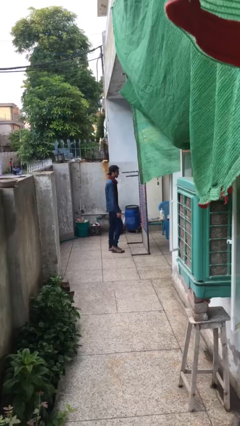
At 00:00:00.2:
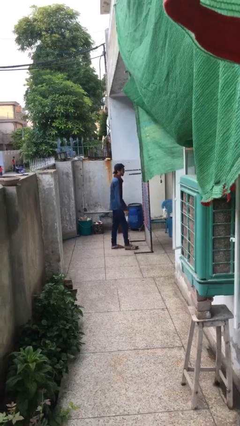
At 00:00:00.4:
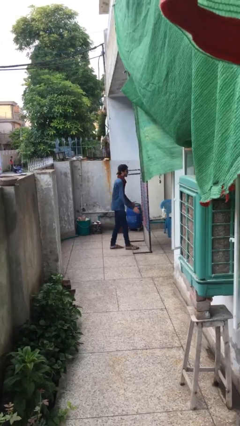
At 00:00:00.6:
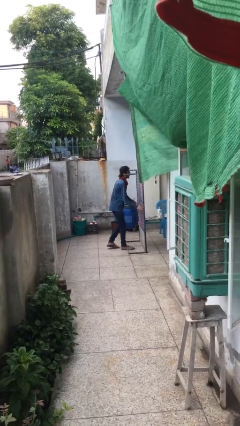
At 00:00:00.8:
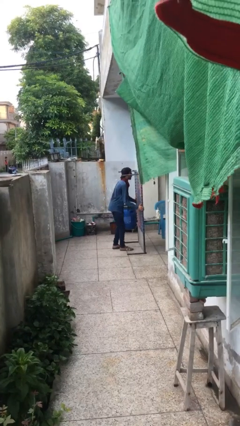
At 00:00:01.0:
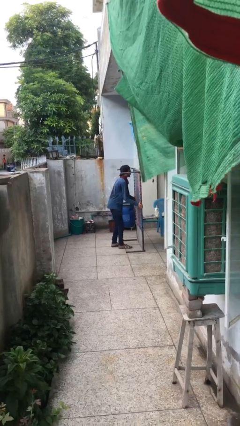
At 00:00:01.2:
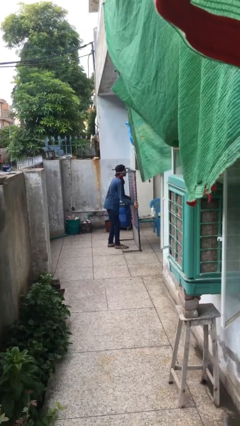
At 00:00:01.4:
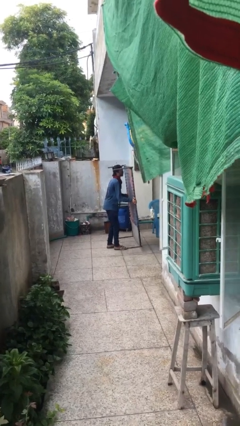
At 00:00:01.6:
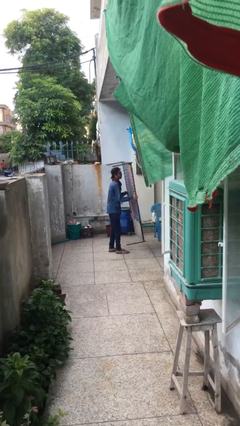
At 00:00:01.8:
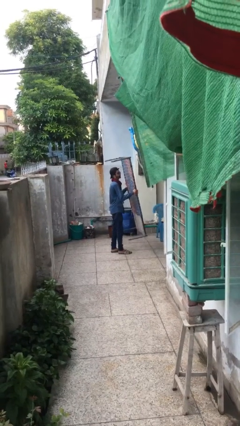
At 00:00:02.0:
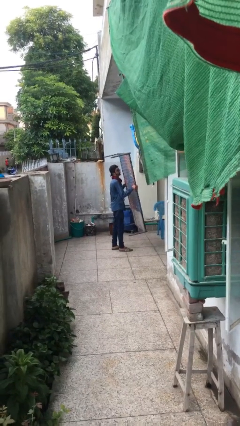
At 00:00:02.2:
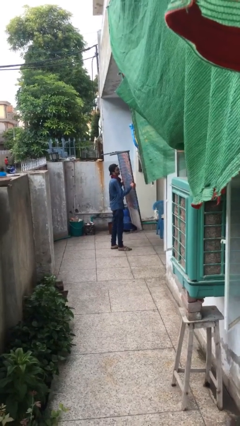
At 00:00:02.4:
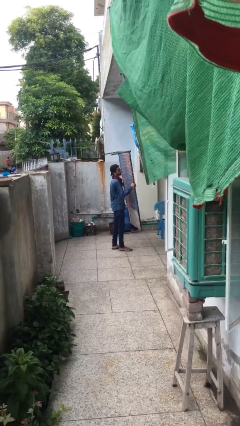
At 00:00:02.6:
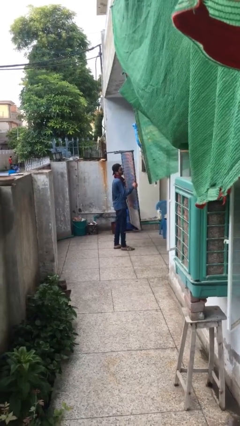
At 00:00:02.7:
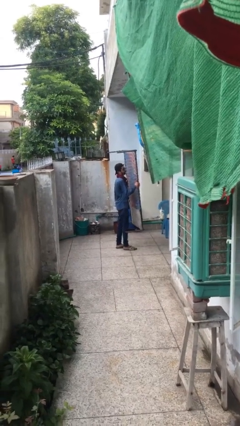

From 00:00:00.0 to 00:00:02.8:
person picks up object from floor

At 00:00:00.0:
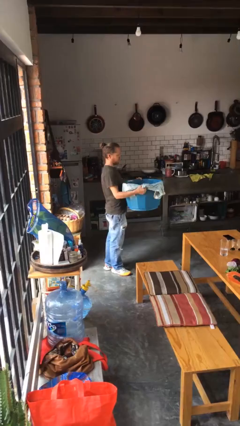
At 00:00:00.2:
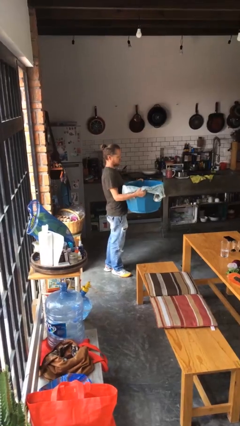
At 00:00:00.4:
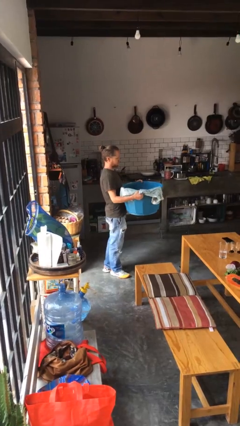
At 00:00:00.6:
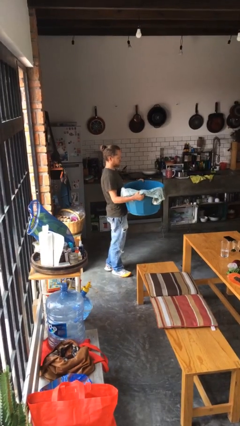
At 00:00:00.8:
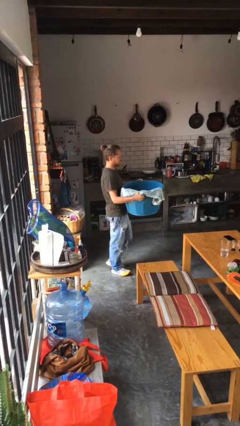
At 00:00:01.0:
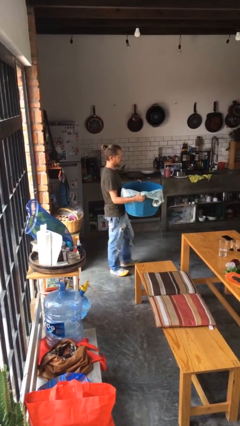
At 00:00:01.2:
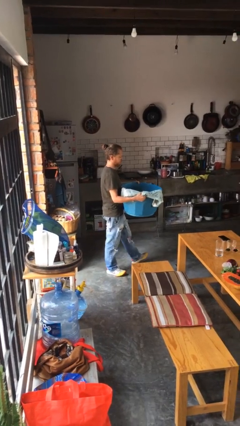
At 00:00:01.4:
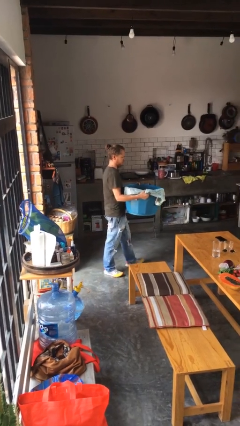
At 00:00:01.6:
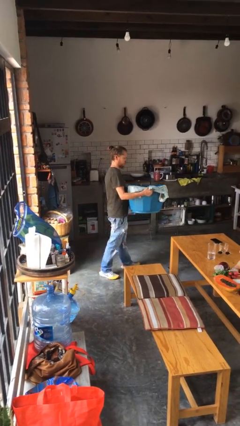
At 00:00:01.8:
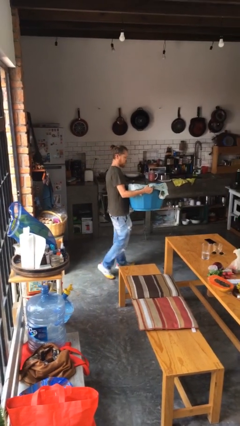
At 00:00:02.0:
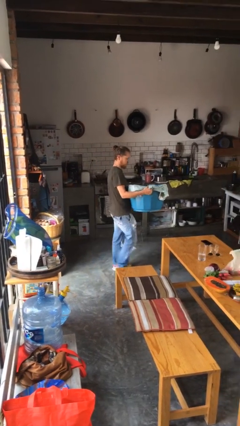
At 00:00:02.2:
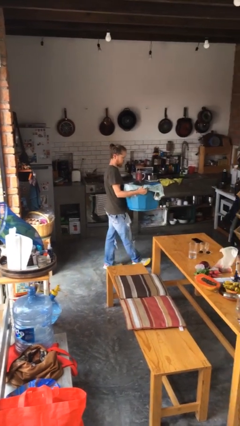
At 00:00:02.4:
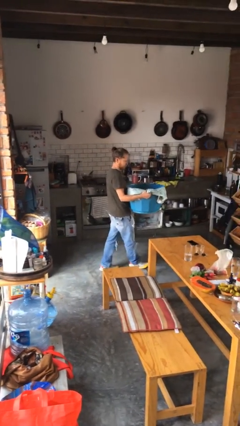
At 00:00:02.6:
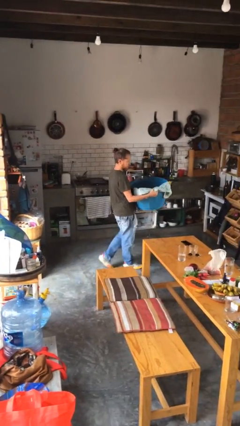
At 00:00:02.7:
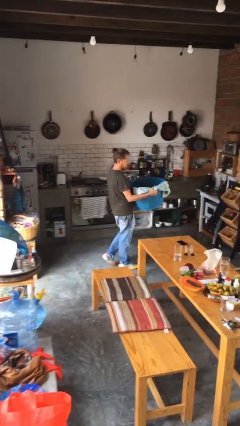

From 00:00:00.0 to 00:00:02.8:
person carries laundry basket

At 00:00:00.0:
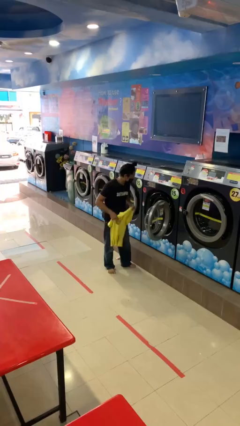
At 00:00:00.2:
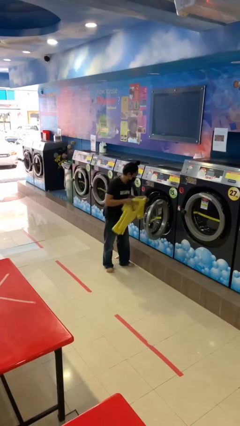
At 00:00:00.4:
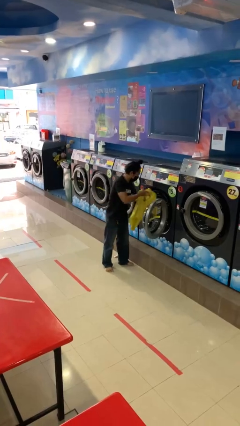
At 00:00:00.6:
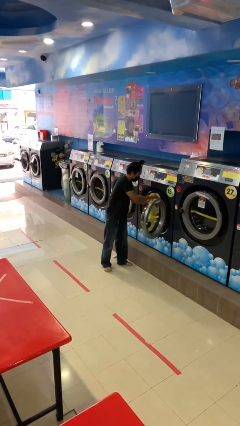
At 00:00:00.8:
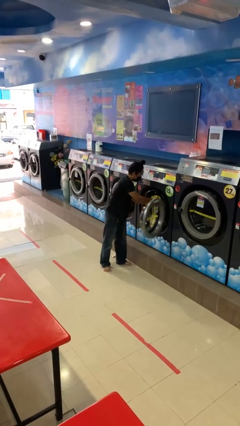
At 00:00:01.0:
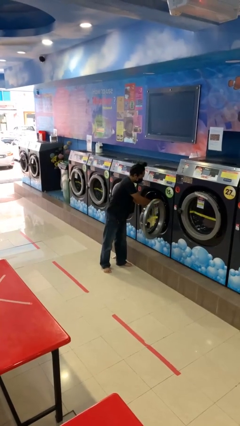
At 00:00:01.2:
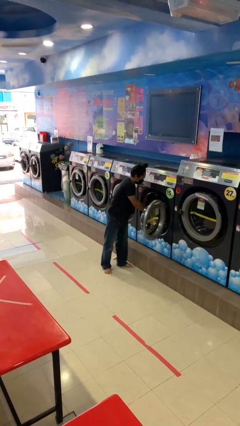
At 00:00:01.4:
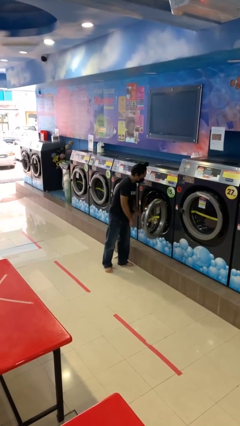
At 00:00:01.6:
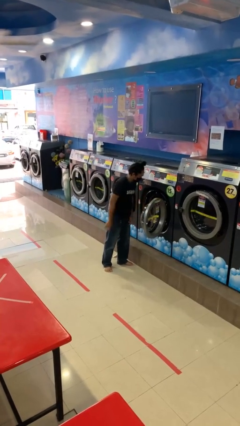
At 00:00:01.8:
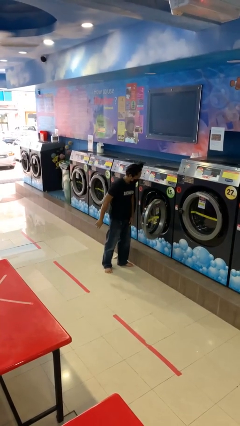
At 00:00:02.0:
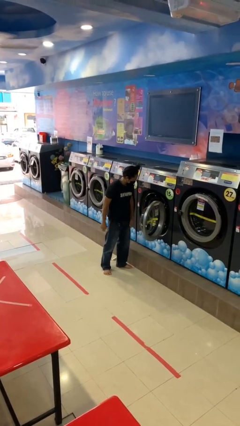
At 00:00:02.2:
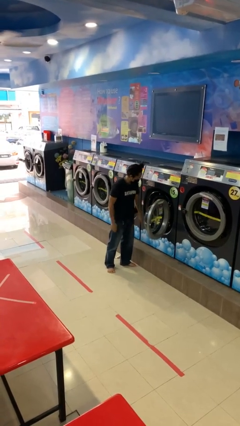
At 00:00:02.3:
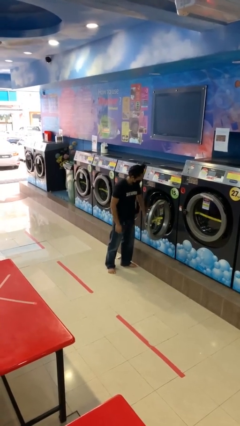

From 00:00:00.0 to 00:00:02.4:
person loads clotheswasher

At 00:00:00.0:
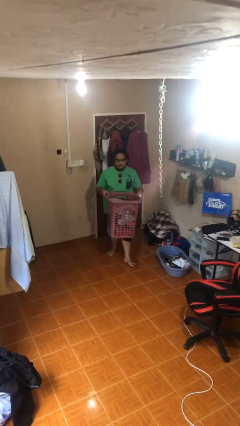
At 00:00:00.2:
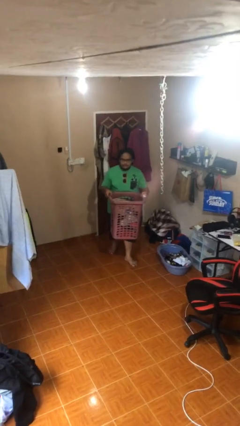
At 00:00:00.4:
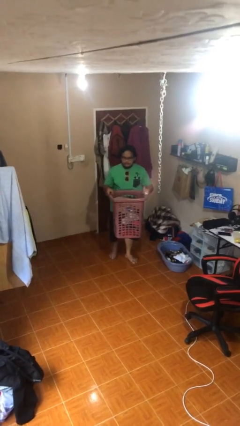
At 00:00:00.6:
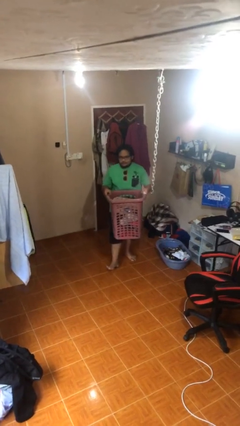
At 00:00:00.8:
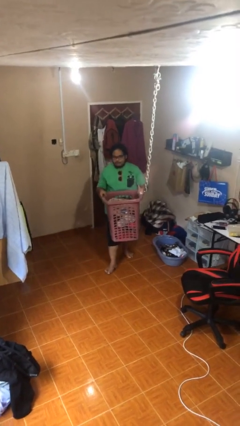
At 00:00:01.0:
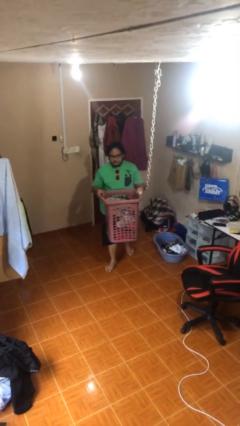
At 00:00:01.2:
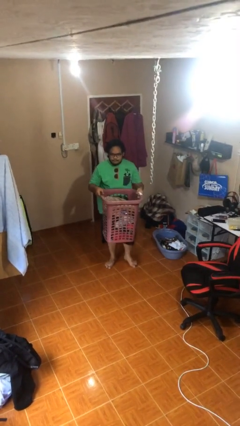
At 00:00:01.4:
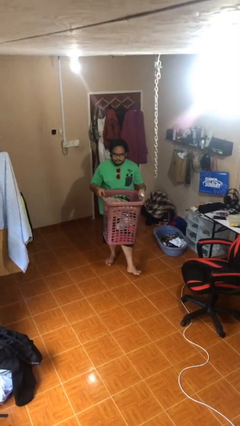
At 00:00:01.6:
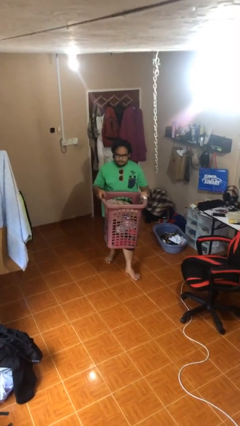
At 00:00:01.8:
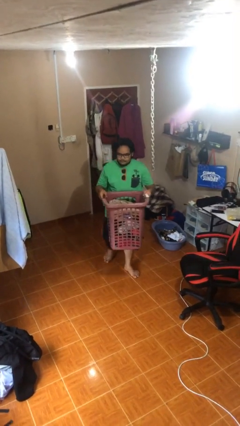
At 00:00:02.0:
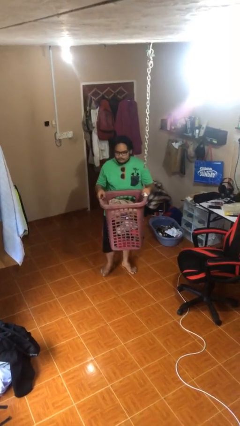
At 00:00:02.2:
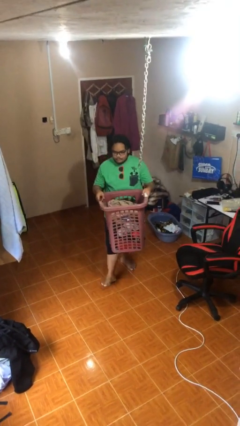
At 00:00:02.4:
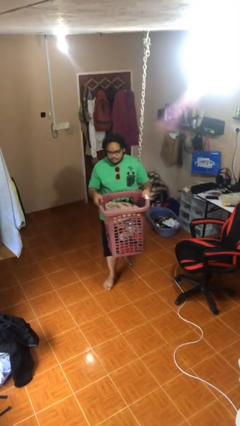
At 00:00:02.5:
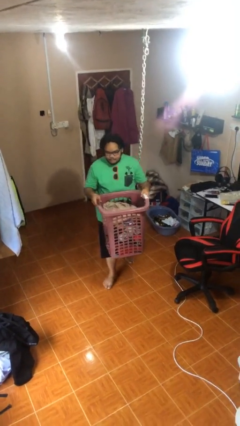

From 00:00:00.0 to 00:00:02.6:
person carries heavy object

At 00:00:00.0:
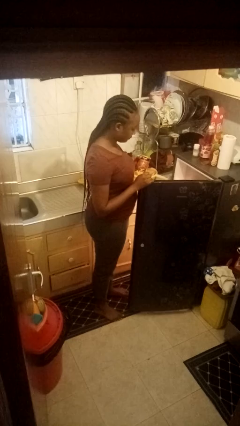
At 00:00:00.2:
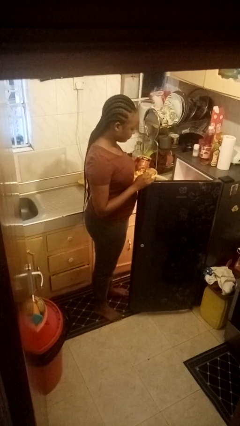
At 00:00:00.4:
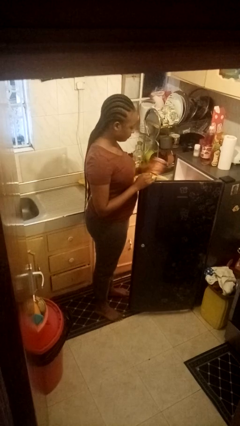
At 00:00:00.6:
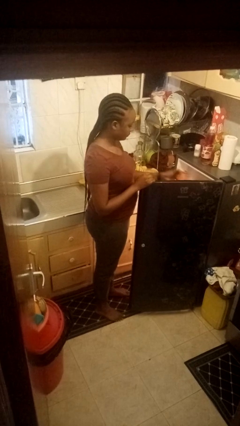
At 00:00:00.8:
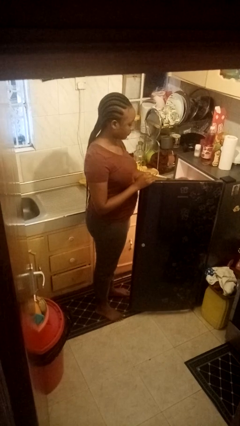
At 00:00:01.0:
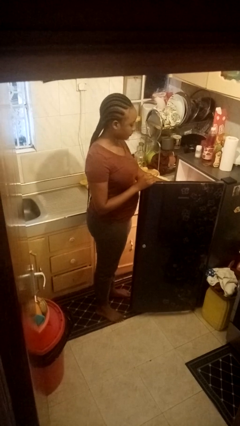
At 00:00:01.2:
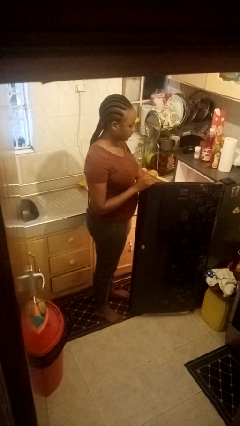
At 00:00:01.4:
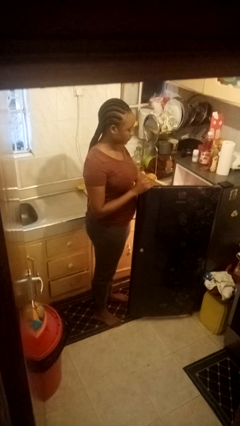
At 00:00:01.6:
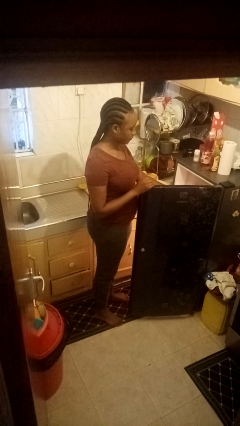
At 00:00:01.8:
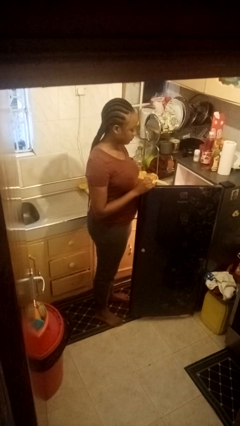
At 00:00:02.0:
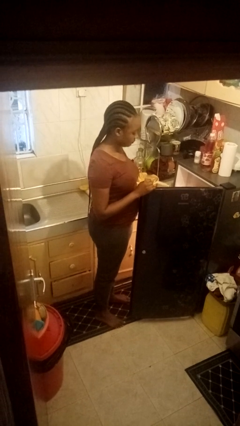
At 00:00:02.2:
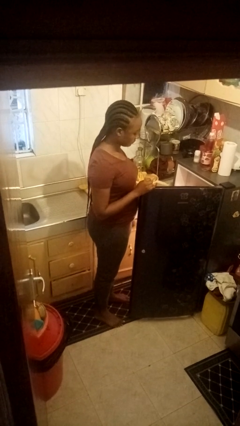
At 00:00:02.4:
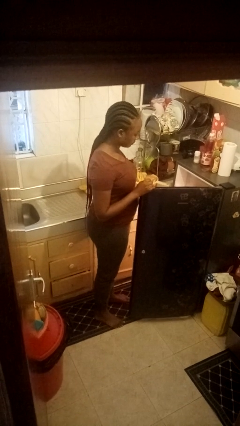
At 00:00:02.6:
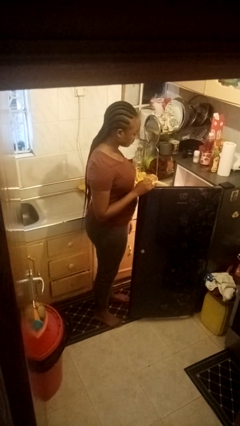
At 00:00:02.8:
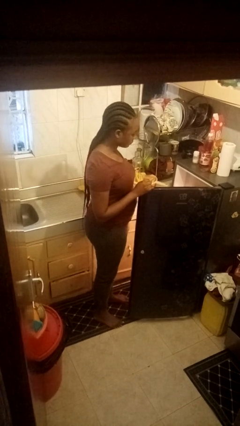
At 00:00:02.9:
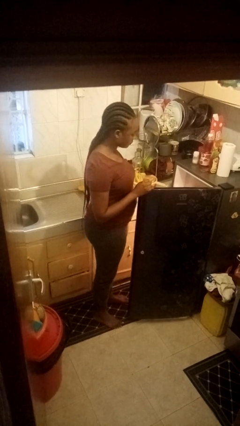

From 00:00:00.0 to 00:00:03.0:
person puts object into refrigerator

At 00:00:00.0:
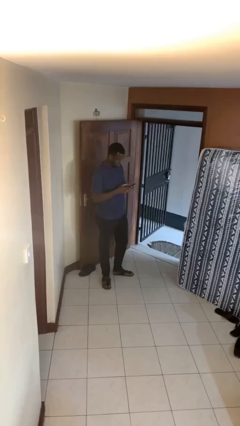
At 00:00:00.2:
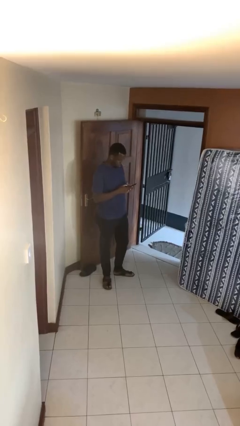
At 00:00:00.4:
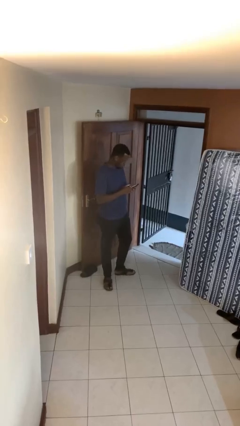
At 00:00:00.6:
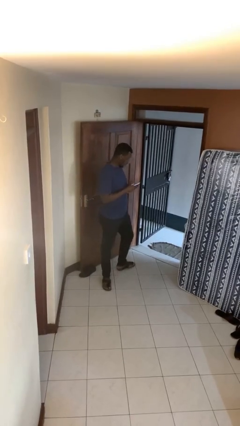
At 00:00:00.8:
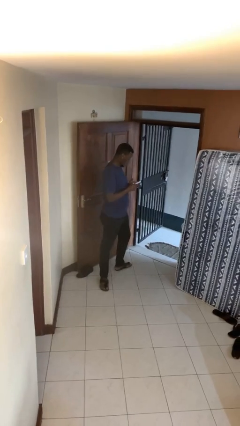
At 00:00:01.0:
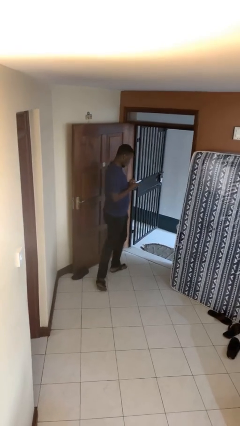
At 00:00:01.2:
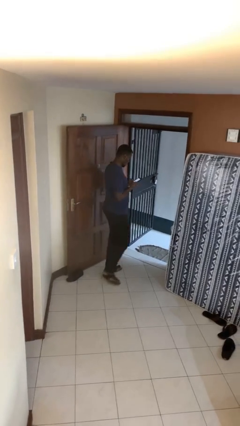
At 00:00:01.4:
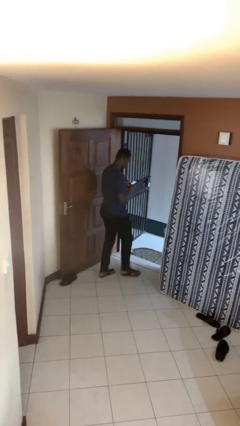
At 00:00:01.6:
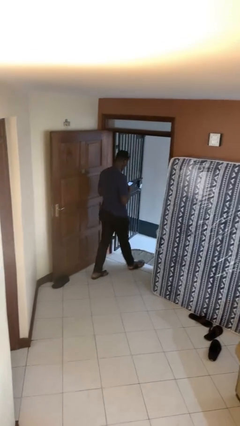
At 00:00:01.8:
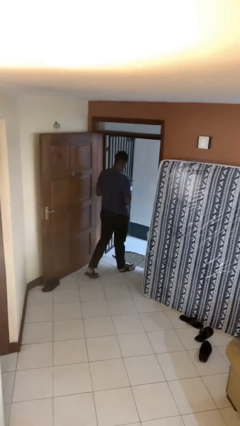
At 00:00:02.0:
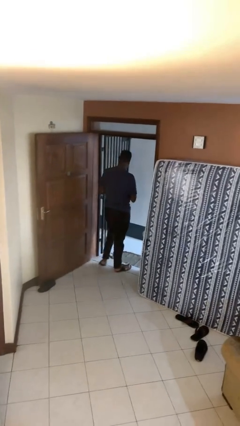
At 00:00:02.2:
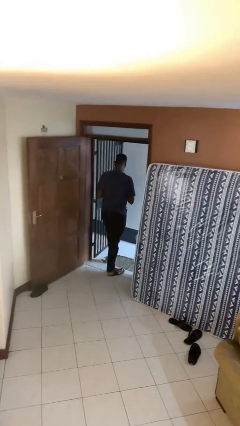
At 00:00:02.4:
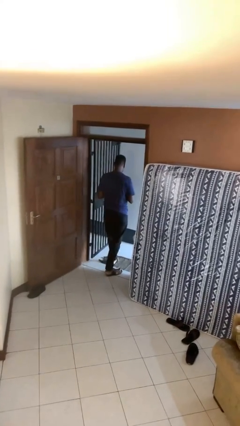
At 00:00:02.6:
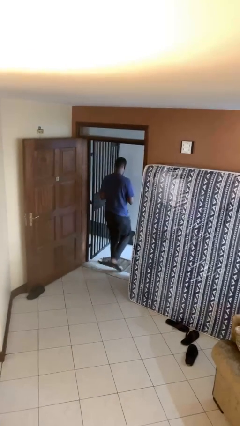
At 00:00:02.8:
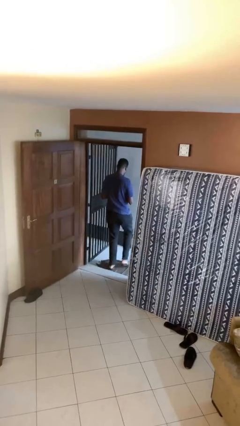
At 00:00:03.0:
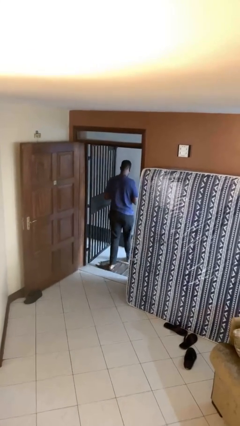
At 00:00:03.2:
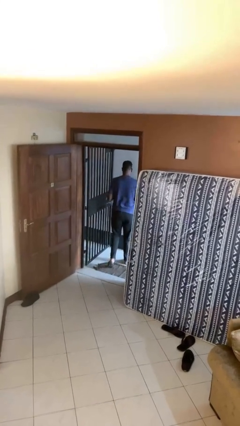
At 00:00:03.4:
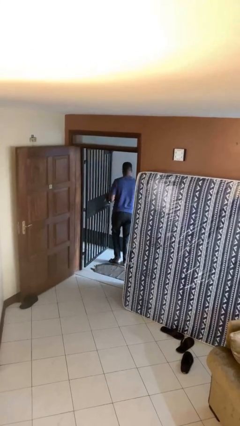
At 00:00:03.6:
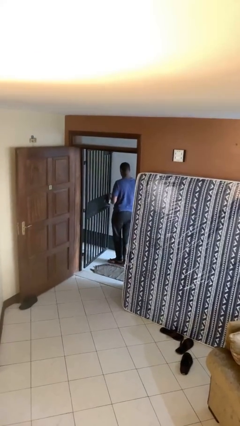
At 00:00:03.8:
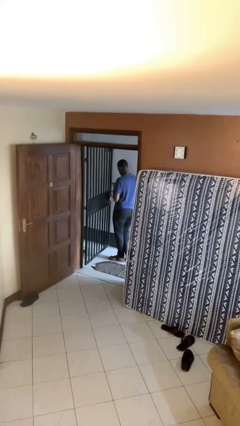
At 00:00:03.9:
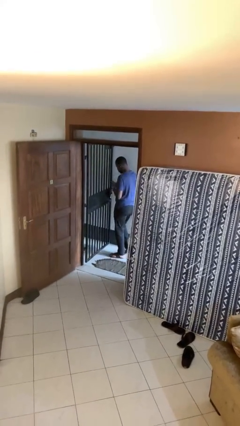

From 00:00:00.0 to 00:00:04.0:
person exits scene through structure
